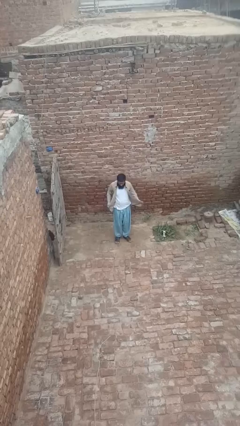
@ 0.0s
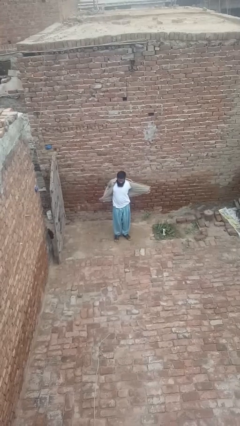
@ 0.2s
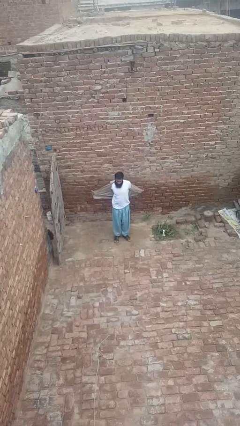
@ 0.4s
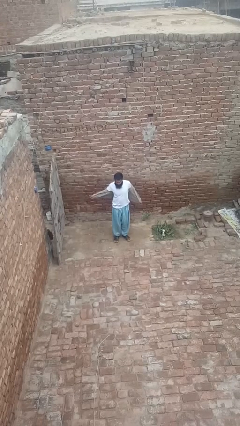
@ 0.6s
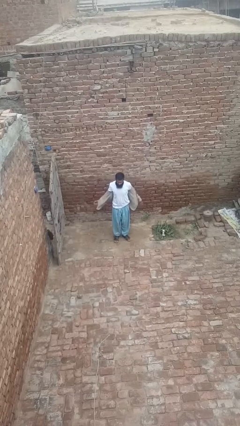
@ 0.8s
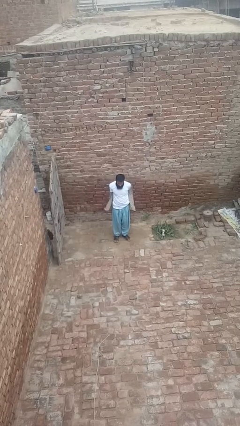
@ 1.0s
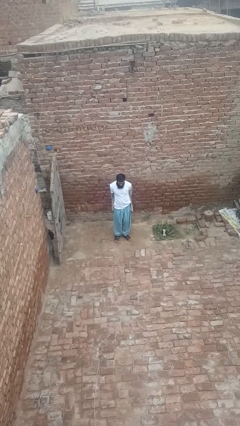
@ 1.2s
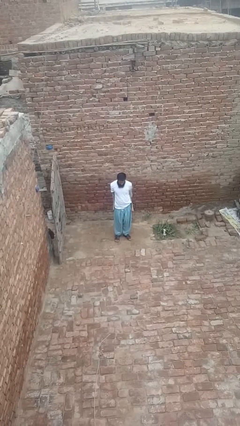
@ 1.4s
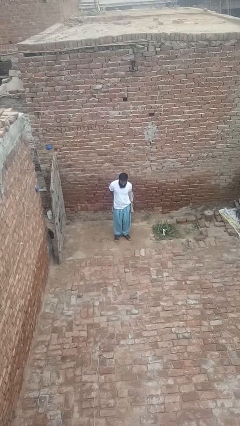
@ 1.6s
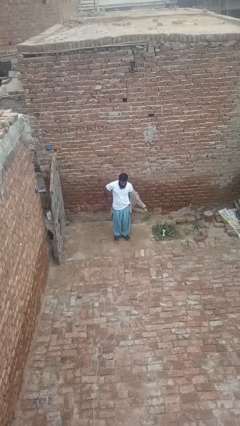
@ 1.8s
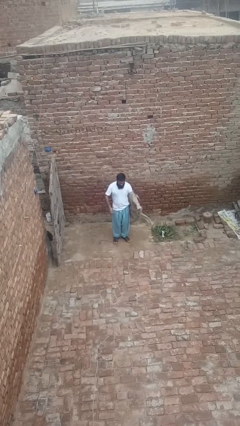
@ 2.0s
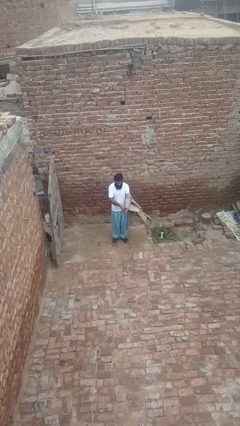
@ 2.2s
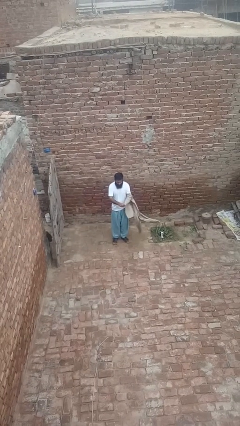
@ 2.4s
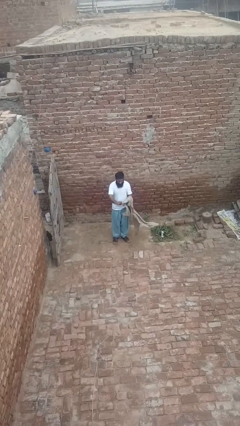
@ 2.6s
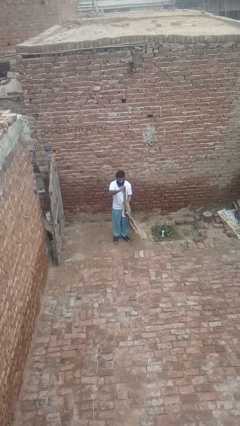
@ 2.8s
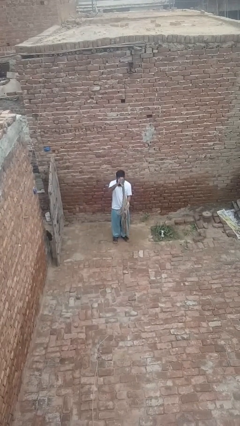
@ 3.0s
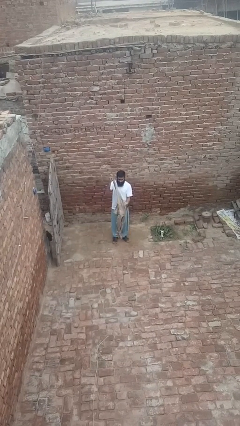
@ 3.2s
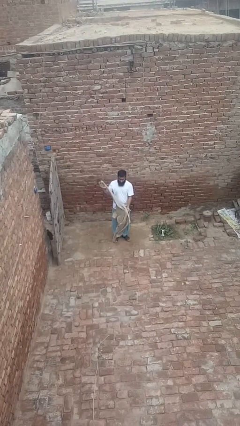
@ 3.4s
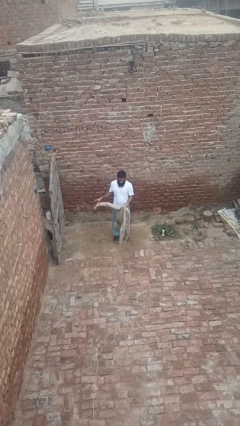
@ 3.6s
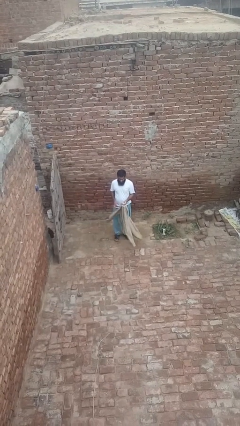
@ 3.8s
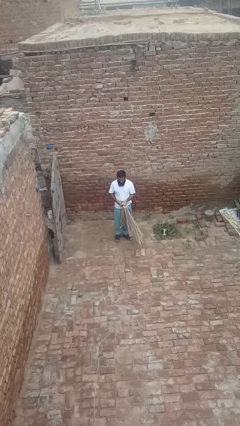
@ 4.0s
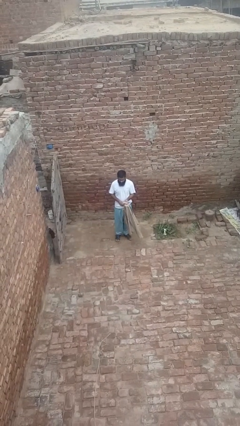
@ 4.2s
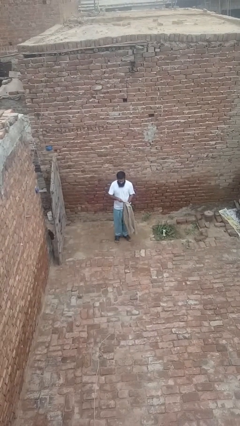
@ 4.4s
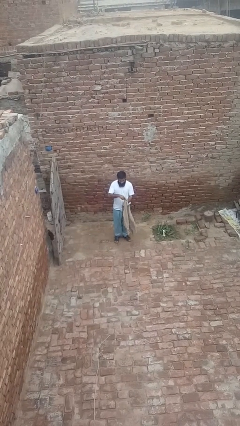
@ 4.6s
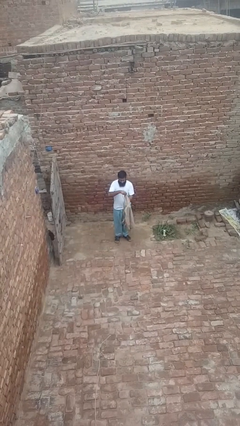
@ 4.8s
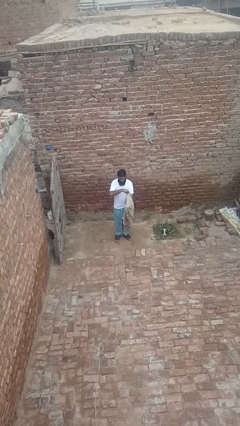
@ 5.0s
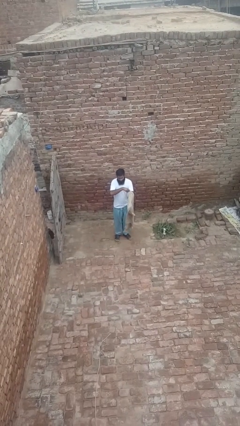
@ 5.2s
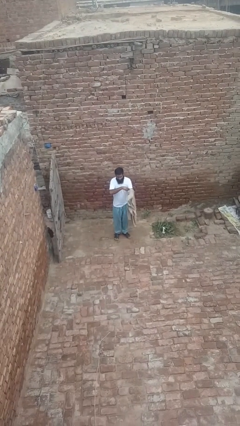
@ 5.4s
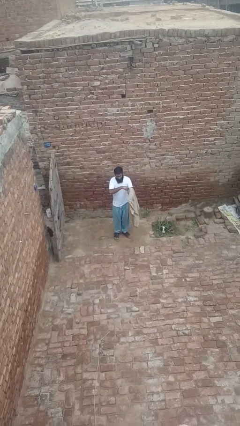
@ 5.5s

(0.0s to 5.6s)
person takes off shirt

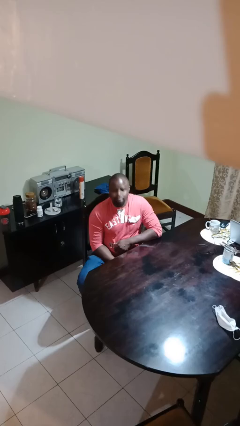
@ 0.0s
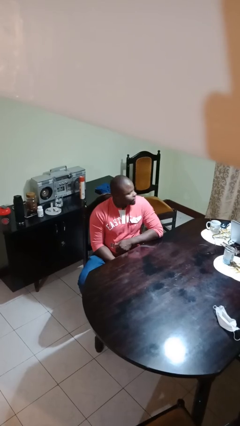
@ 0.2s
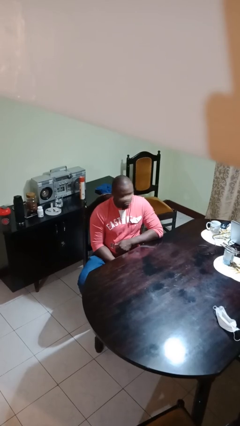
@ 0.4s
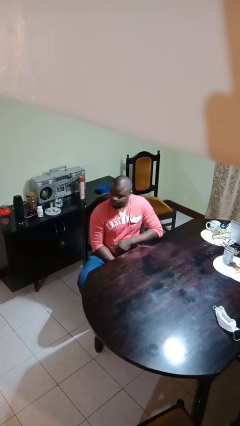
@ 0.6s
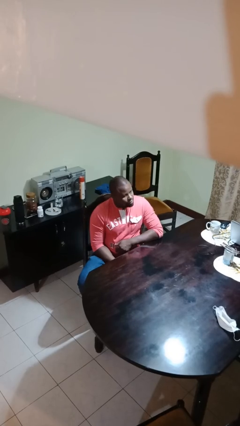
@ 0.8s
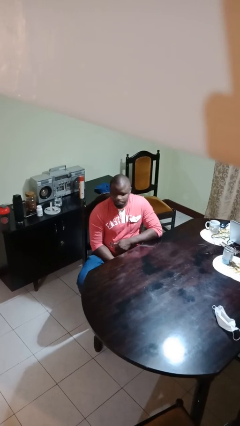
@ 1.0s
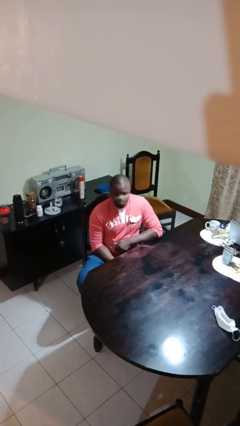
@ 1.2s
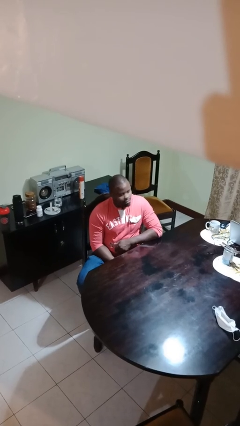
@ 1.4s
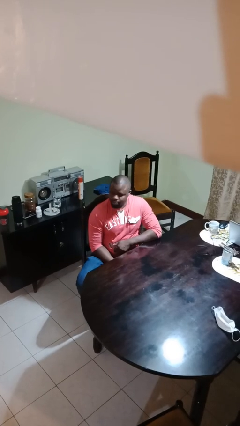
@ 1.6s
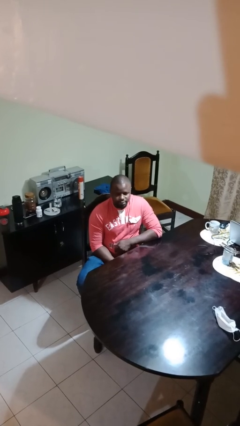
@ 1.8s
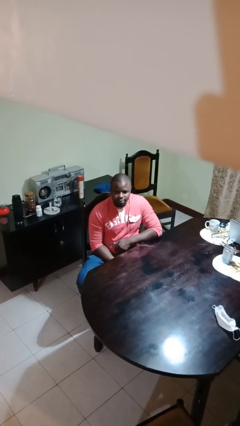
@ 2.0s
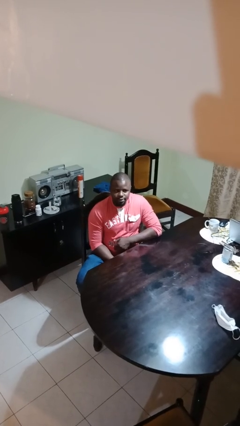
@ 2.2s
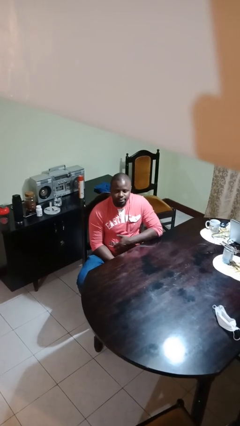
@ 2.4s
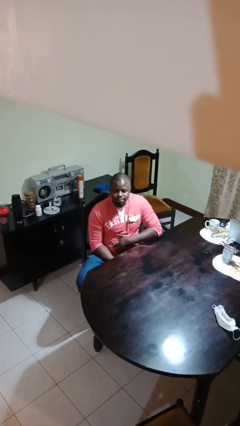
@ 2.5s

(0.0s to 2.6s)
person shakes head

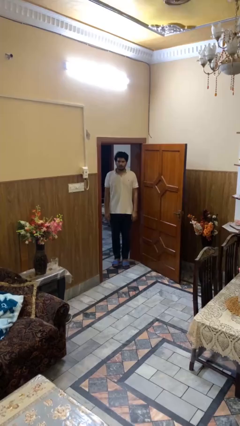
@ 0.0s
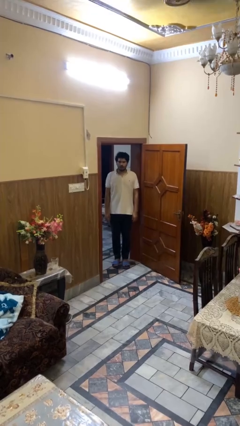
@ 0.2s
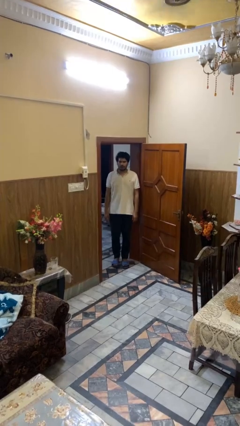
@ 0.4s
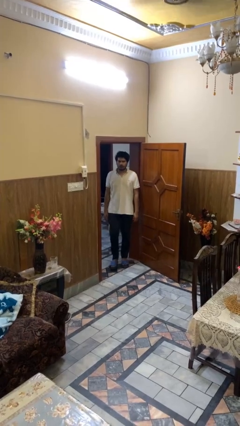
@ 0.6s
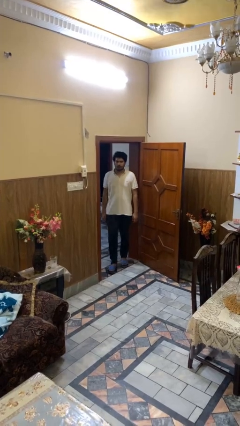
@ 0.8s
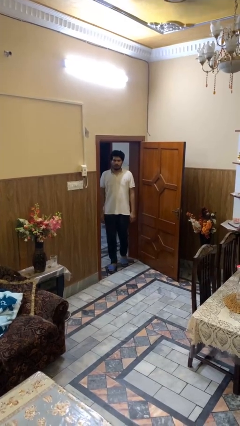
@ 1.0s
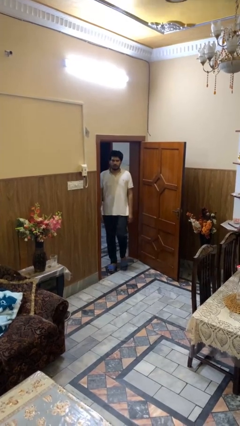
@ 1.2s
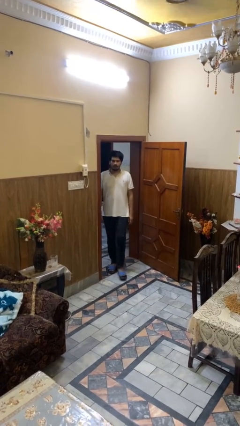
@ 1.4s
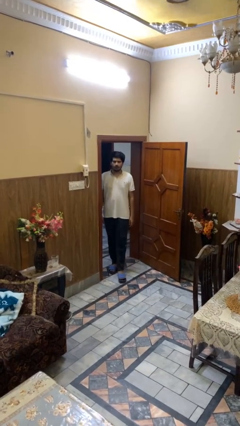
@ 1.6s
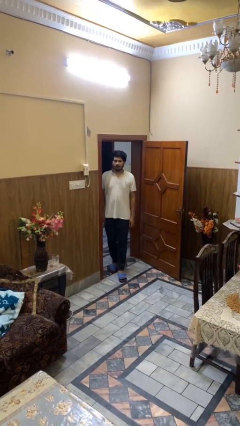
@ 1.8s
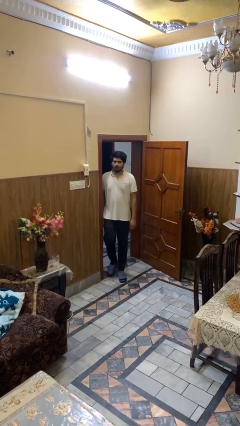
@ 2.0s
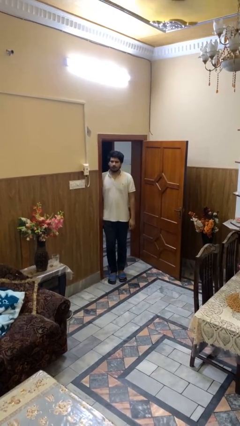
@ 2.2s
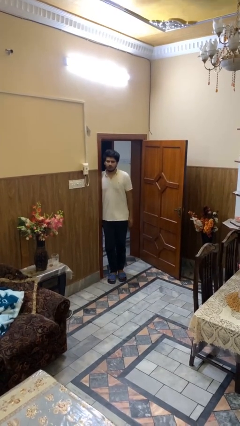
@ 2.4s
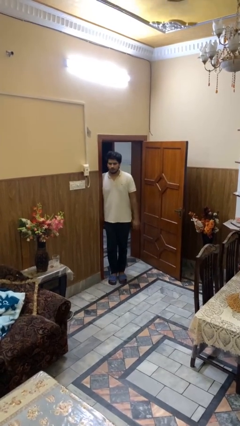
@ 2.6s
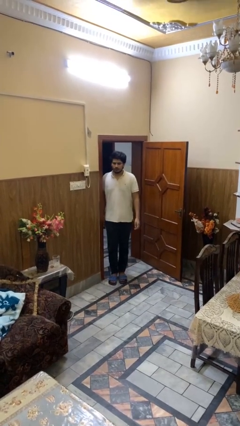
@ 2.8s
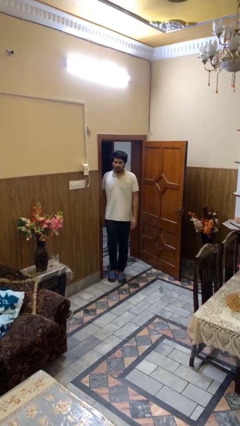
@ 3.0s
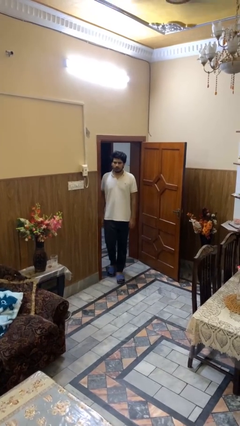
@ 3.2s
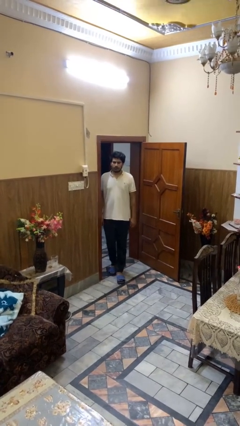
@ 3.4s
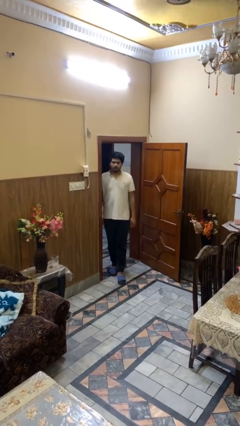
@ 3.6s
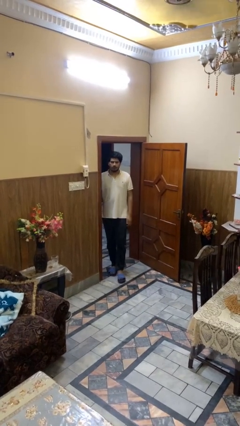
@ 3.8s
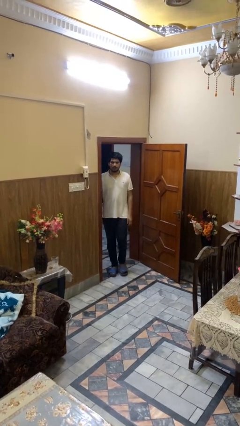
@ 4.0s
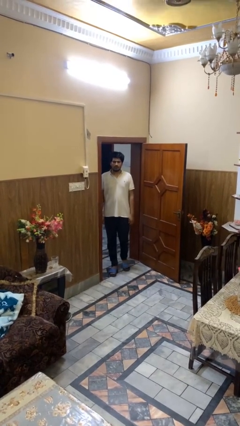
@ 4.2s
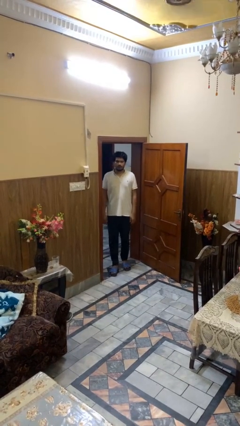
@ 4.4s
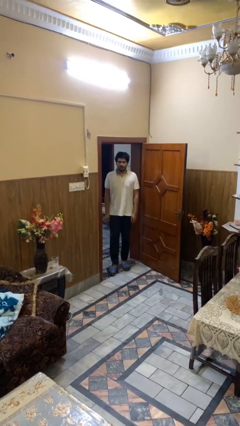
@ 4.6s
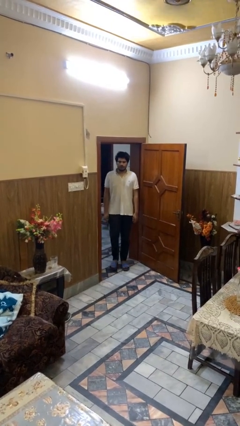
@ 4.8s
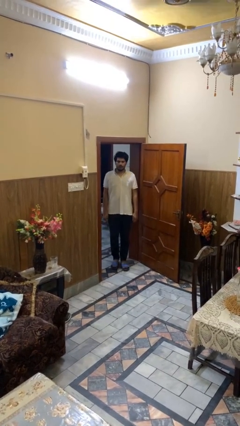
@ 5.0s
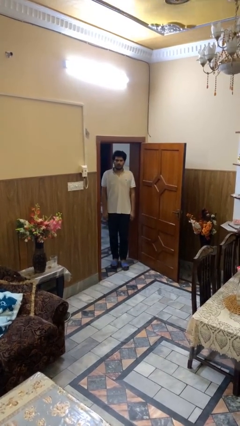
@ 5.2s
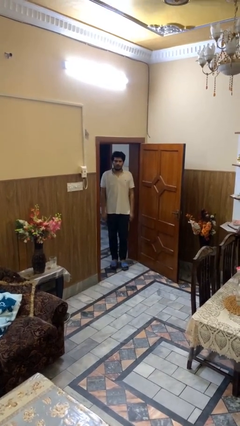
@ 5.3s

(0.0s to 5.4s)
person bumps into wall

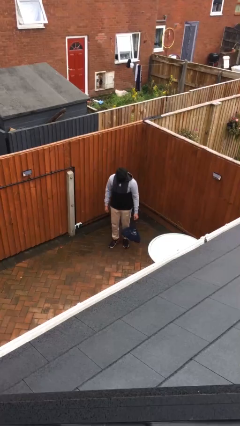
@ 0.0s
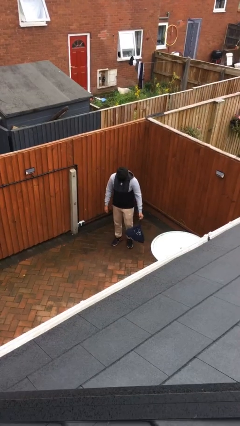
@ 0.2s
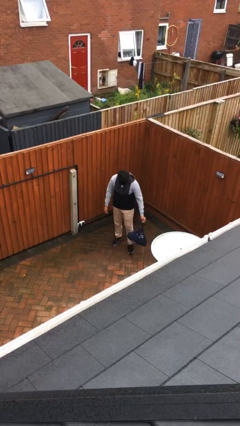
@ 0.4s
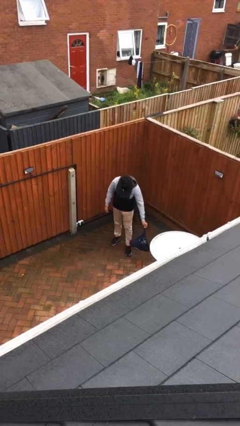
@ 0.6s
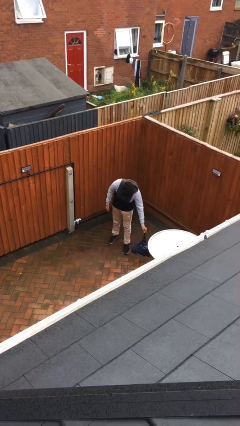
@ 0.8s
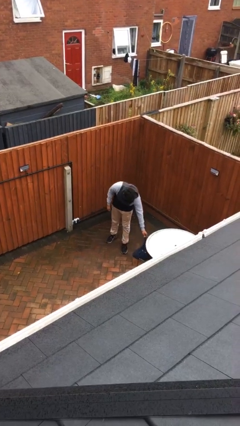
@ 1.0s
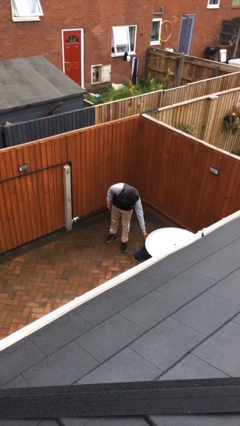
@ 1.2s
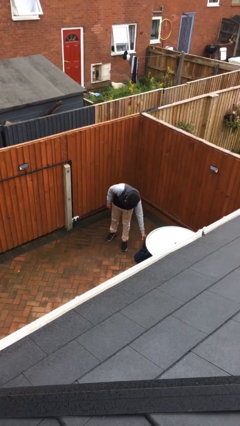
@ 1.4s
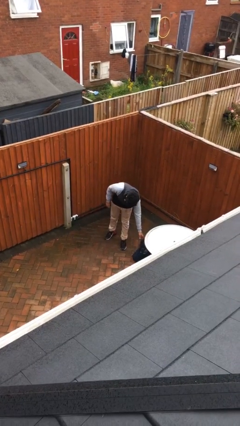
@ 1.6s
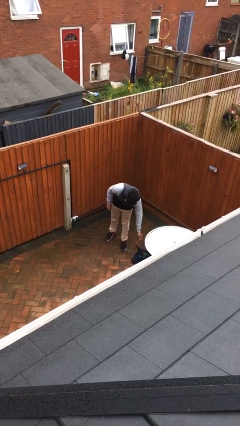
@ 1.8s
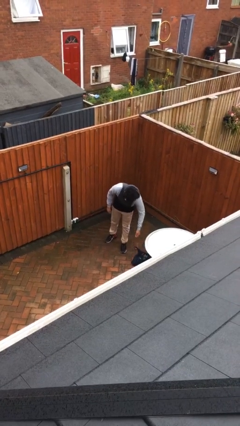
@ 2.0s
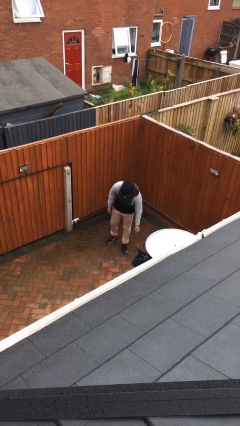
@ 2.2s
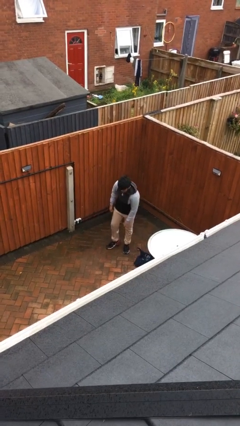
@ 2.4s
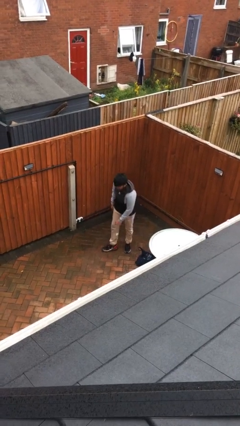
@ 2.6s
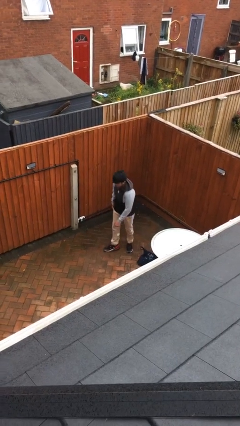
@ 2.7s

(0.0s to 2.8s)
person puts down object on floor

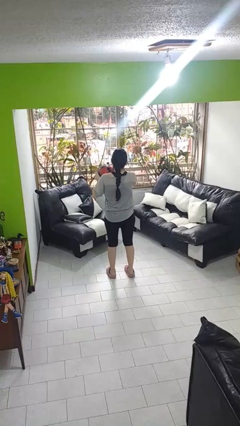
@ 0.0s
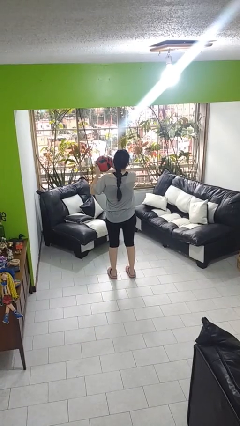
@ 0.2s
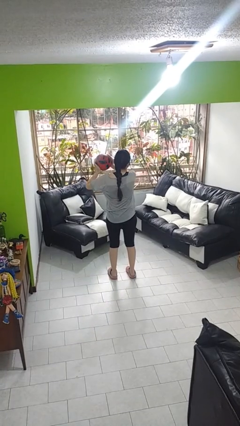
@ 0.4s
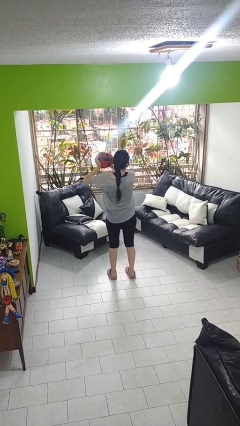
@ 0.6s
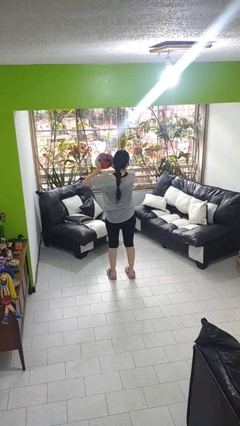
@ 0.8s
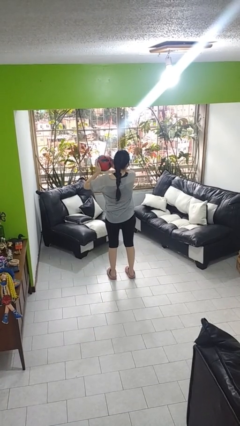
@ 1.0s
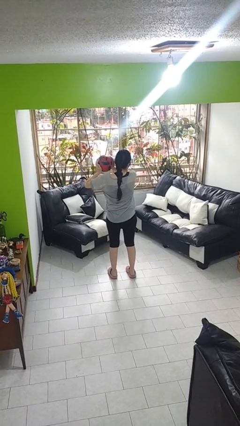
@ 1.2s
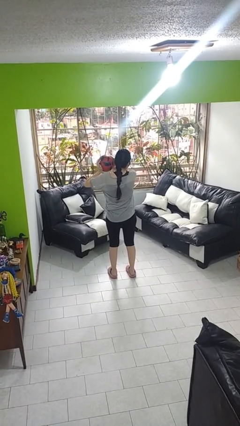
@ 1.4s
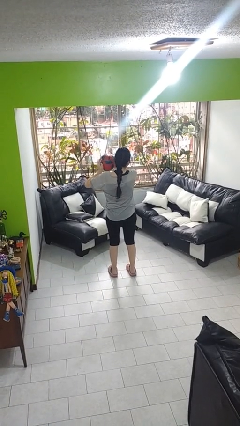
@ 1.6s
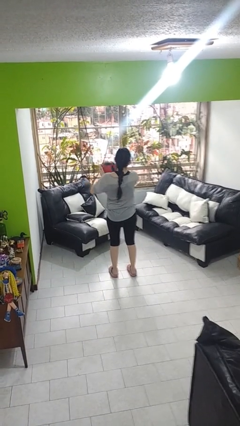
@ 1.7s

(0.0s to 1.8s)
person squeezes object
